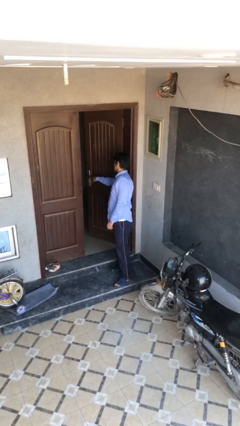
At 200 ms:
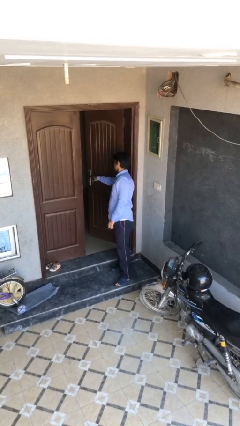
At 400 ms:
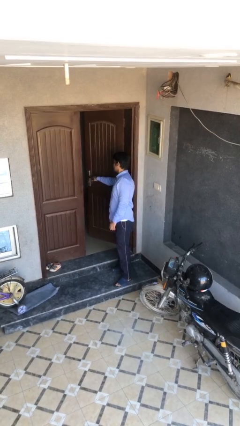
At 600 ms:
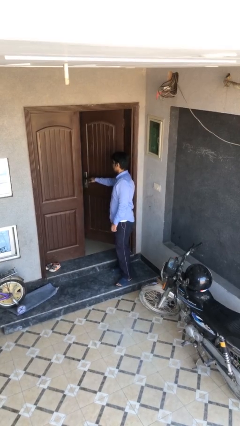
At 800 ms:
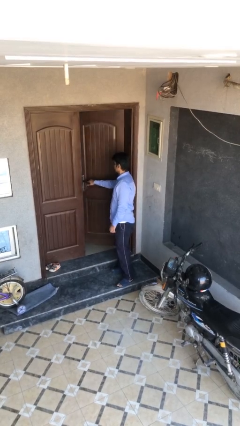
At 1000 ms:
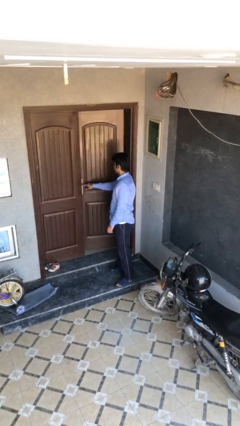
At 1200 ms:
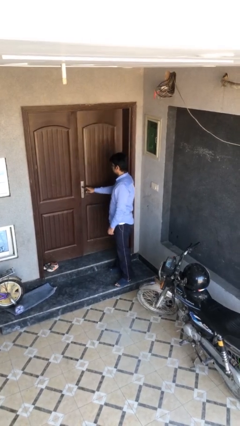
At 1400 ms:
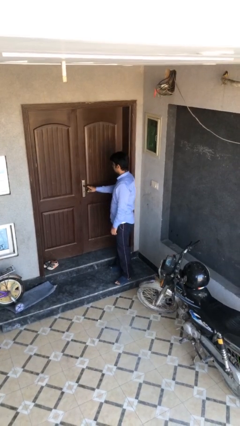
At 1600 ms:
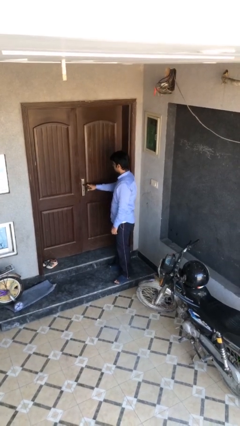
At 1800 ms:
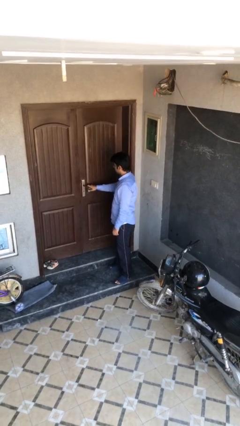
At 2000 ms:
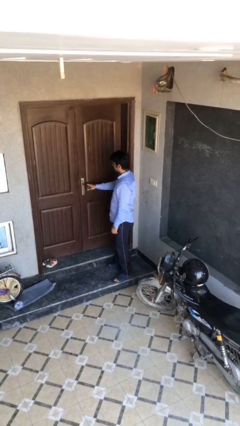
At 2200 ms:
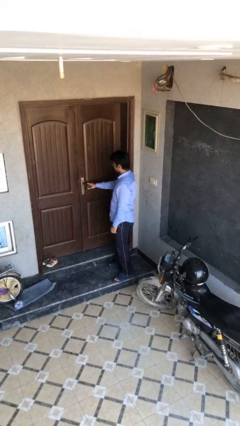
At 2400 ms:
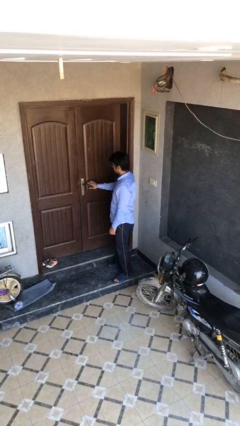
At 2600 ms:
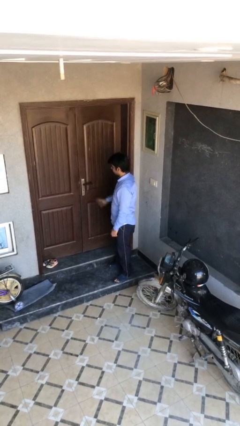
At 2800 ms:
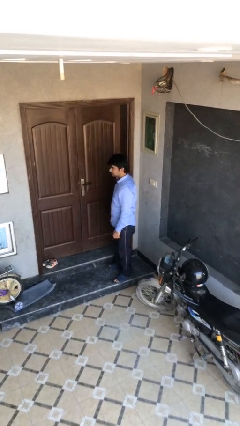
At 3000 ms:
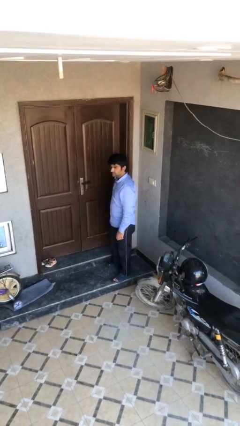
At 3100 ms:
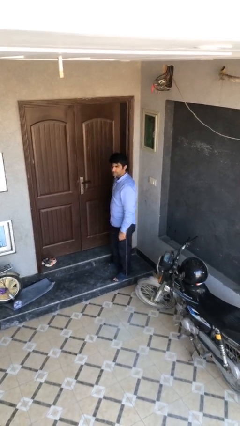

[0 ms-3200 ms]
person closes facility door

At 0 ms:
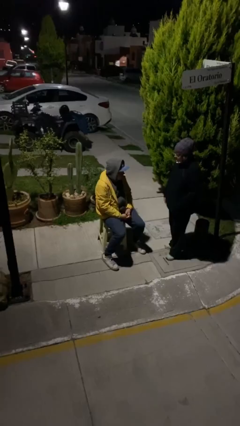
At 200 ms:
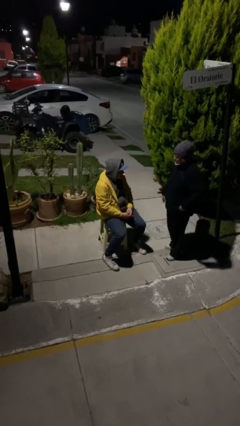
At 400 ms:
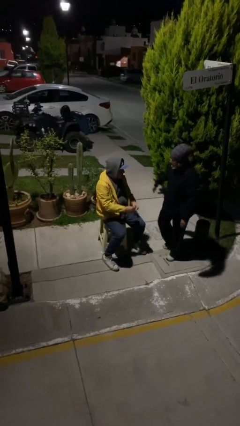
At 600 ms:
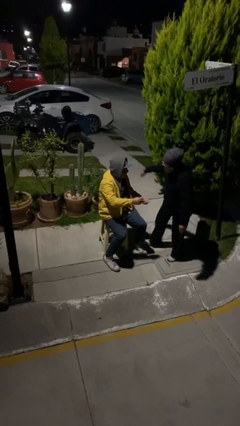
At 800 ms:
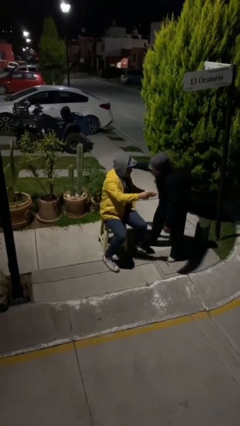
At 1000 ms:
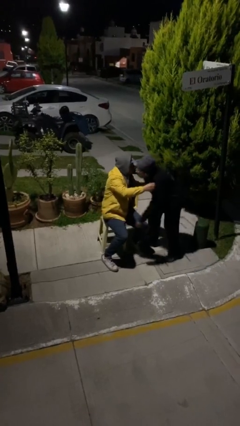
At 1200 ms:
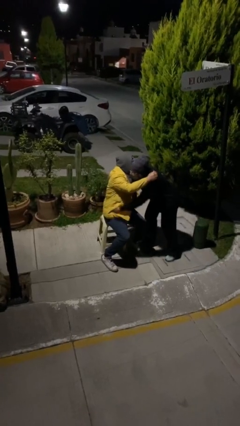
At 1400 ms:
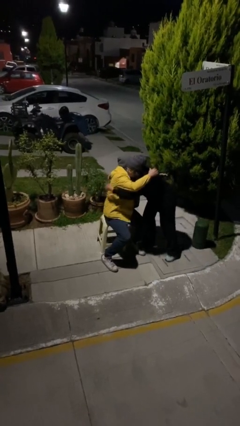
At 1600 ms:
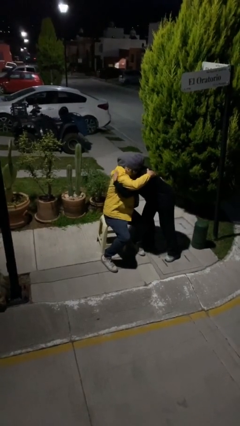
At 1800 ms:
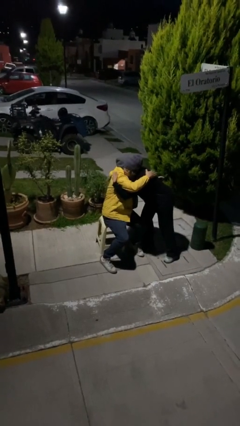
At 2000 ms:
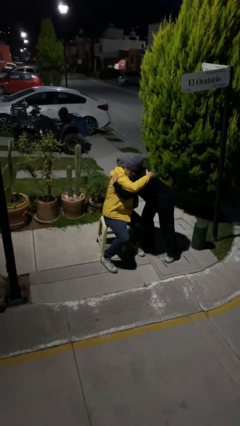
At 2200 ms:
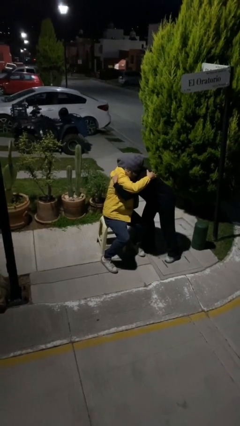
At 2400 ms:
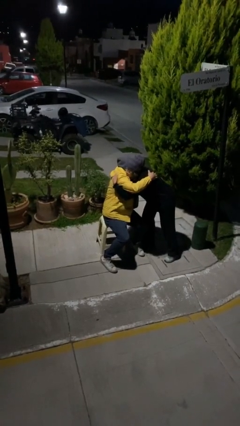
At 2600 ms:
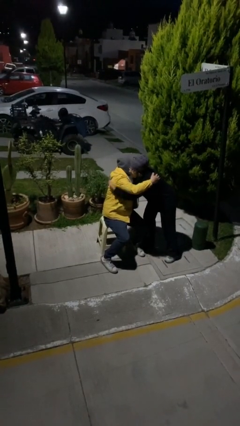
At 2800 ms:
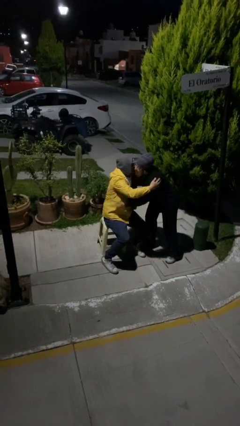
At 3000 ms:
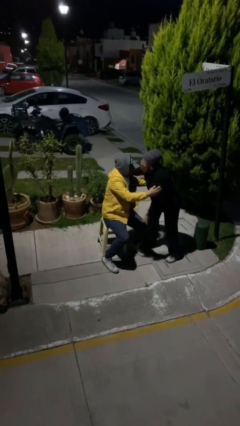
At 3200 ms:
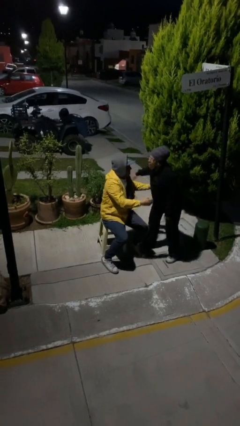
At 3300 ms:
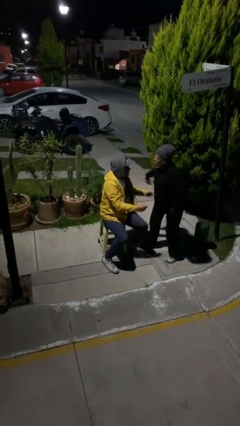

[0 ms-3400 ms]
person embraces person

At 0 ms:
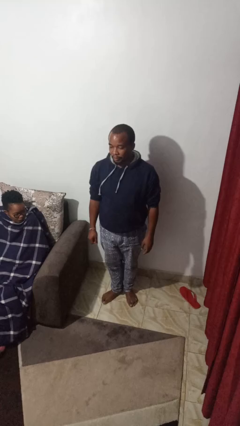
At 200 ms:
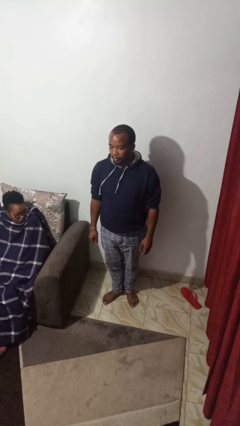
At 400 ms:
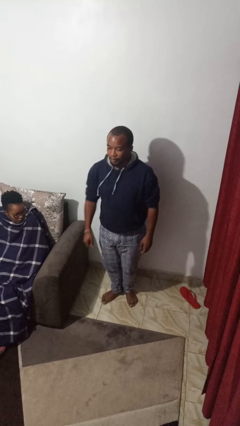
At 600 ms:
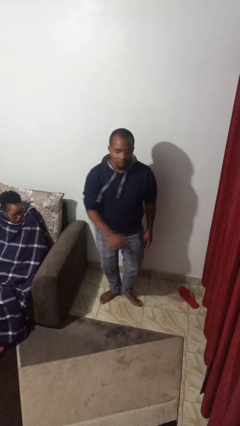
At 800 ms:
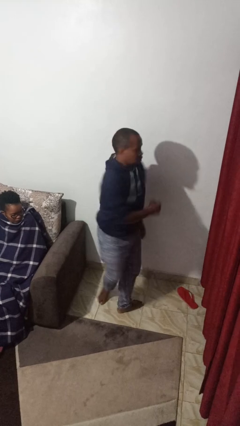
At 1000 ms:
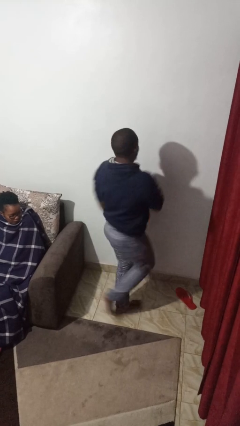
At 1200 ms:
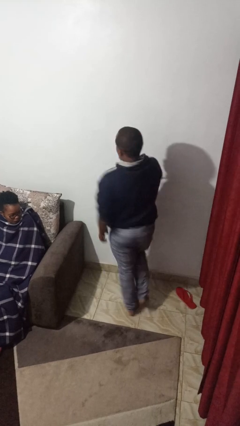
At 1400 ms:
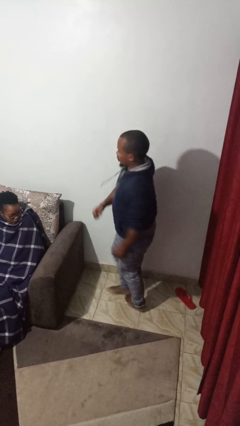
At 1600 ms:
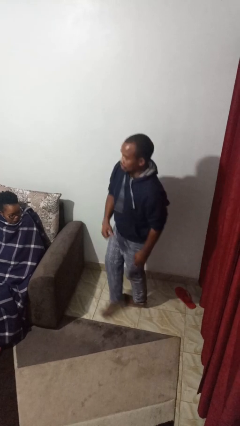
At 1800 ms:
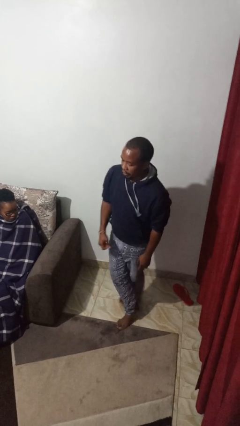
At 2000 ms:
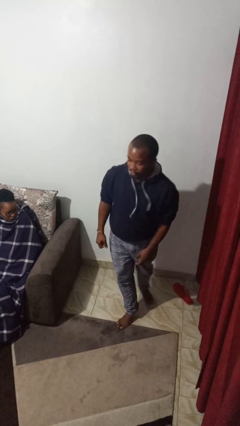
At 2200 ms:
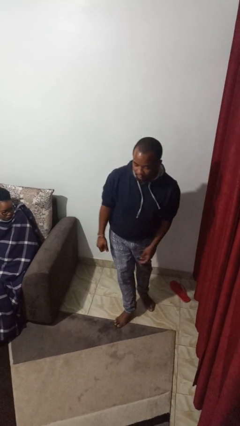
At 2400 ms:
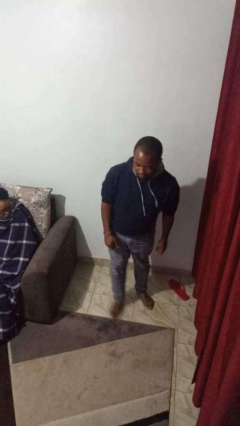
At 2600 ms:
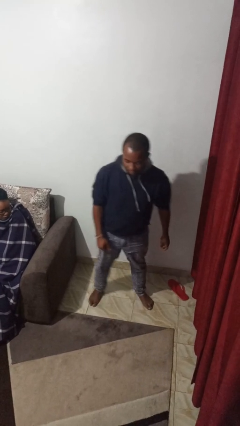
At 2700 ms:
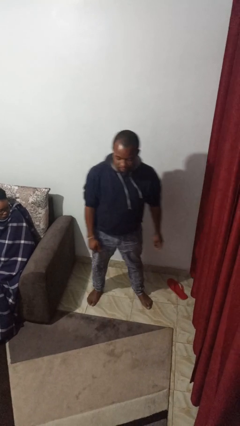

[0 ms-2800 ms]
person twirls

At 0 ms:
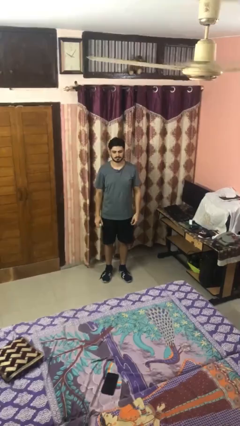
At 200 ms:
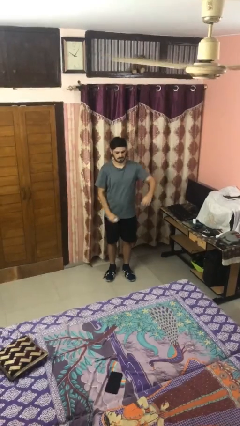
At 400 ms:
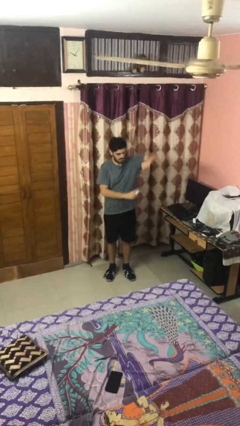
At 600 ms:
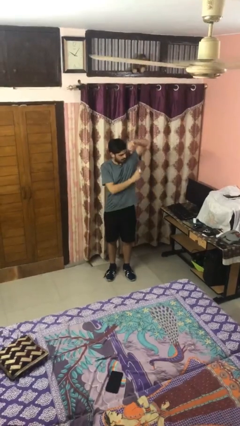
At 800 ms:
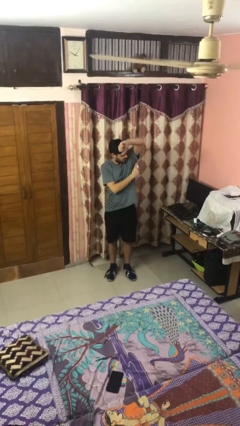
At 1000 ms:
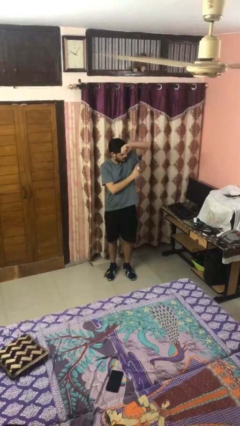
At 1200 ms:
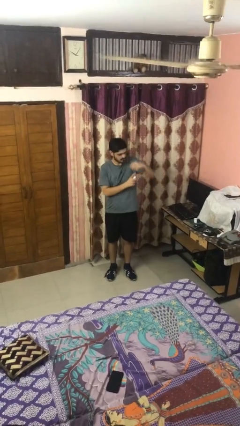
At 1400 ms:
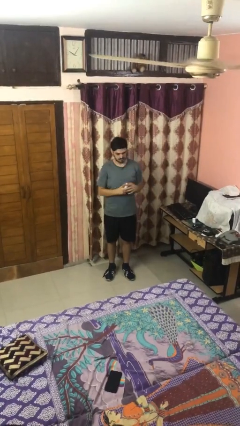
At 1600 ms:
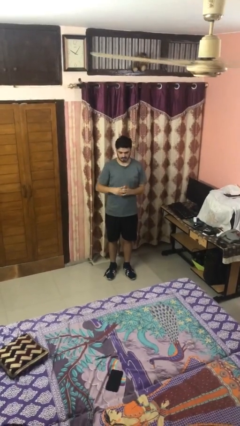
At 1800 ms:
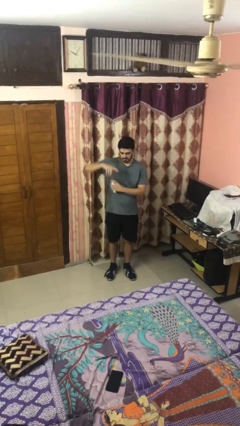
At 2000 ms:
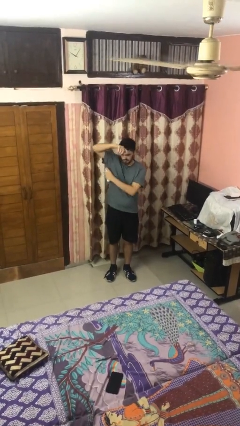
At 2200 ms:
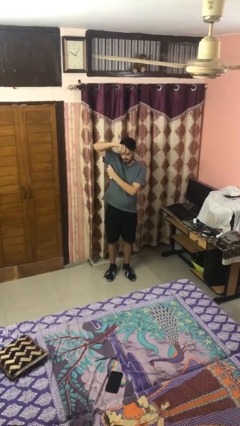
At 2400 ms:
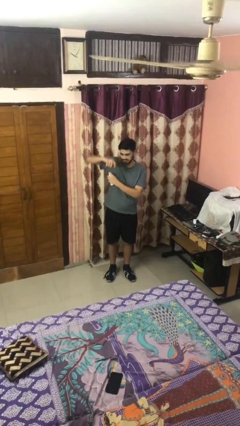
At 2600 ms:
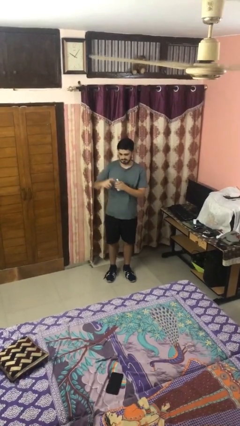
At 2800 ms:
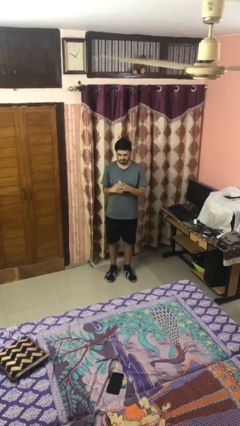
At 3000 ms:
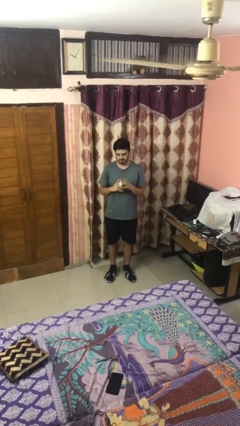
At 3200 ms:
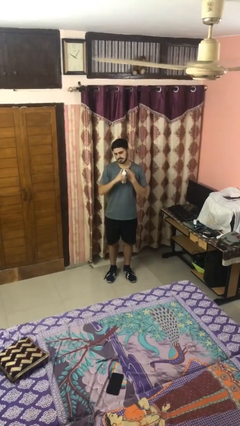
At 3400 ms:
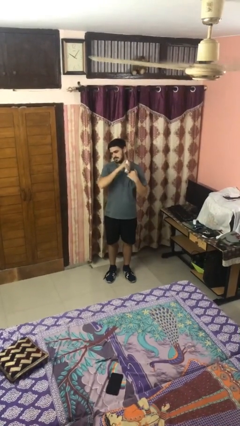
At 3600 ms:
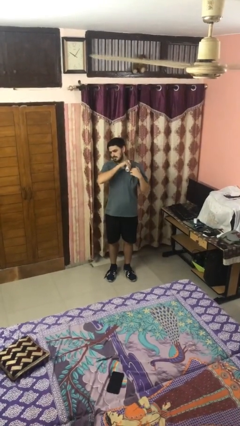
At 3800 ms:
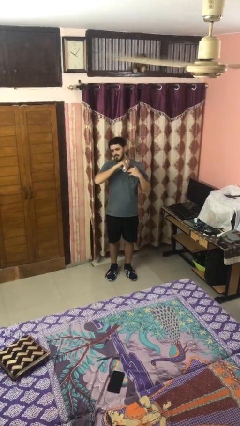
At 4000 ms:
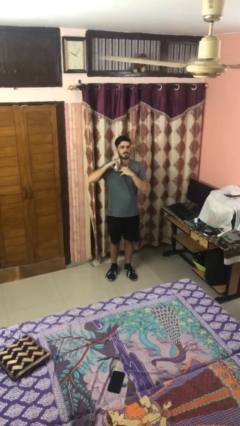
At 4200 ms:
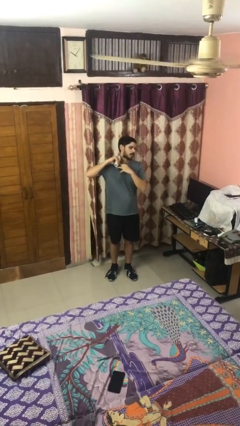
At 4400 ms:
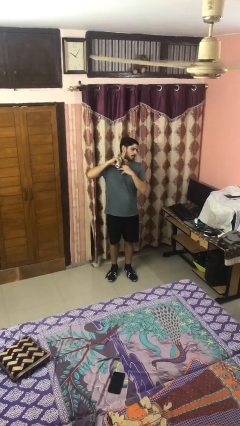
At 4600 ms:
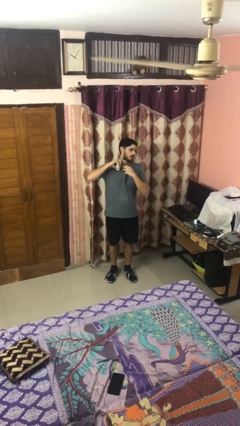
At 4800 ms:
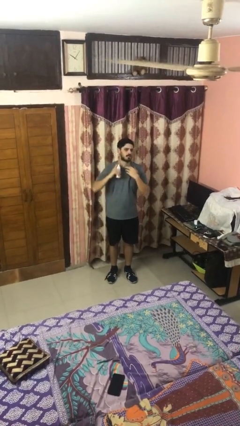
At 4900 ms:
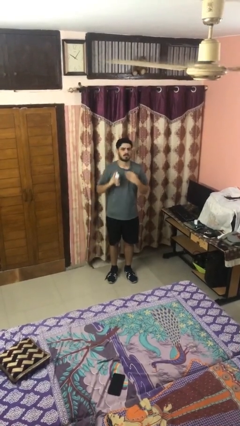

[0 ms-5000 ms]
person applies deodorant

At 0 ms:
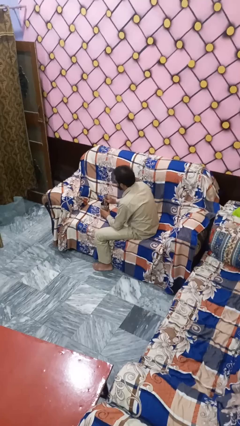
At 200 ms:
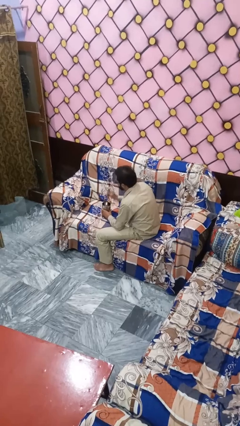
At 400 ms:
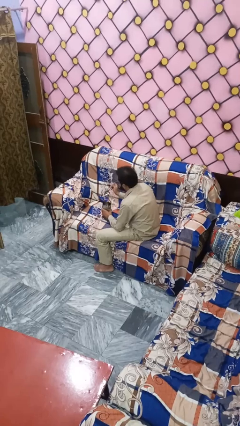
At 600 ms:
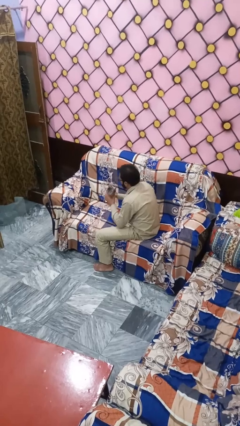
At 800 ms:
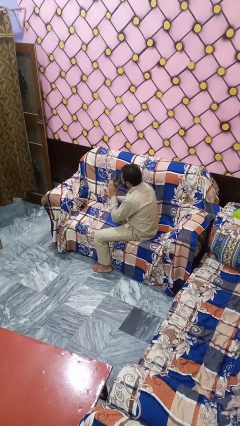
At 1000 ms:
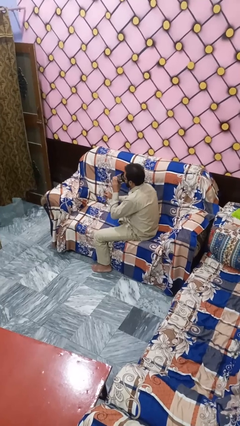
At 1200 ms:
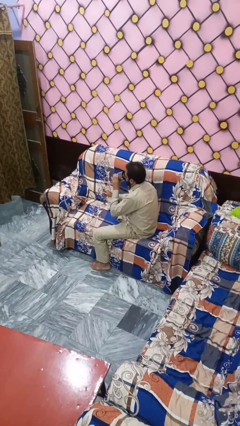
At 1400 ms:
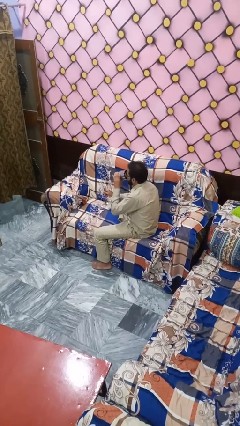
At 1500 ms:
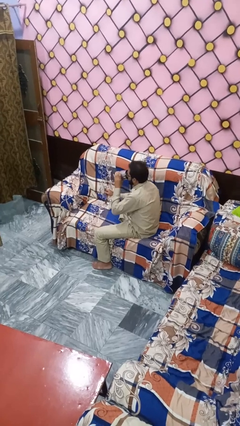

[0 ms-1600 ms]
person drinks from mug

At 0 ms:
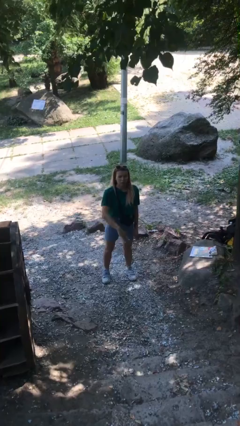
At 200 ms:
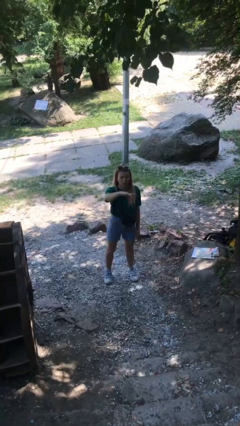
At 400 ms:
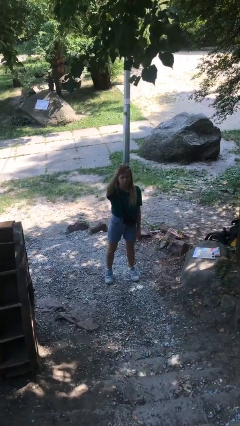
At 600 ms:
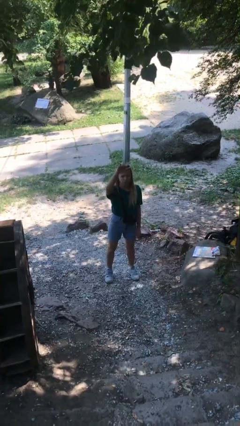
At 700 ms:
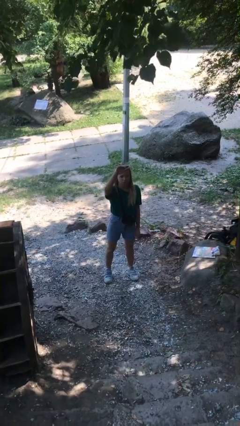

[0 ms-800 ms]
person gestures swipe up

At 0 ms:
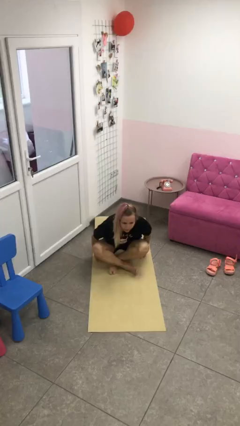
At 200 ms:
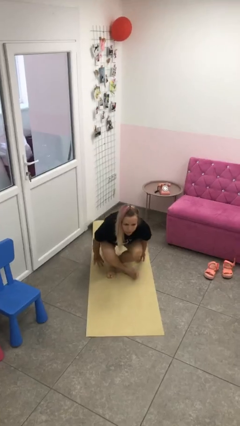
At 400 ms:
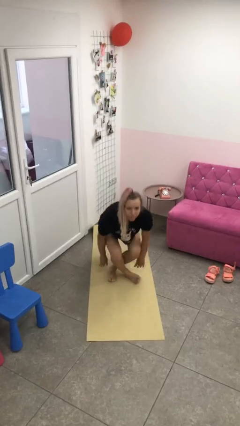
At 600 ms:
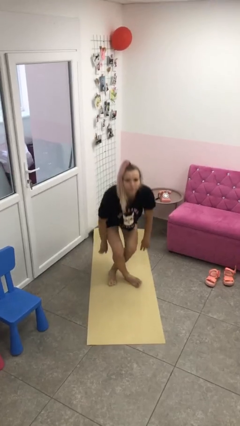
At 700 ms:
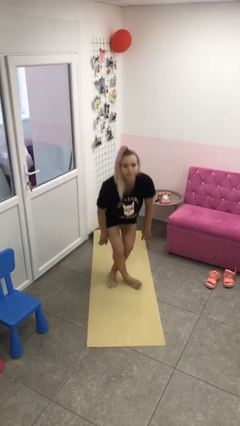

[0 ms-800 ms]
person stands up from floor
